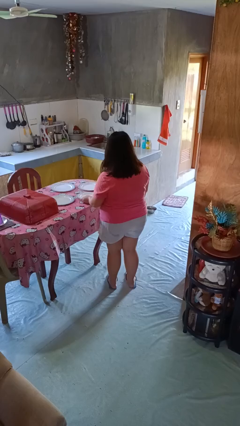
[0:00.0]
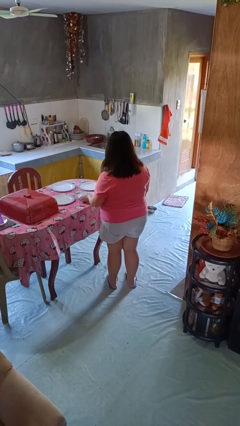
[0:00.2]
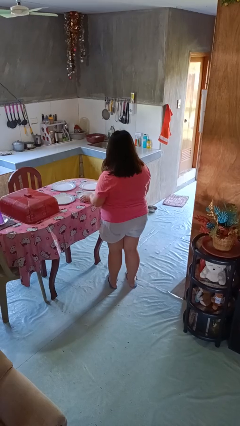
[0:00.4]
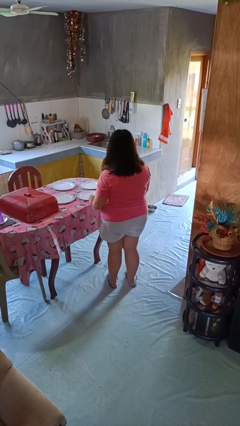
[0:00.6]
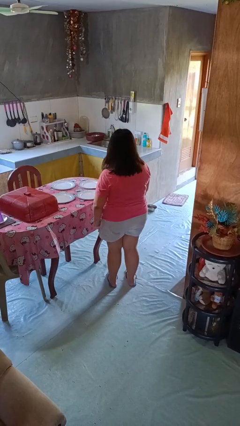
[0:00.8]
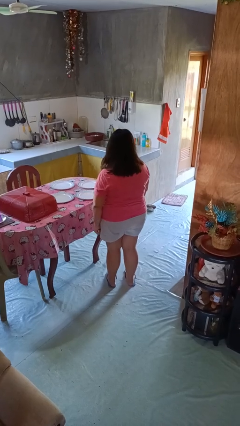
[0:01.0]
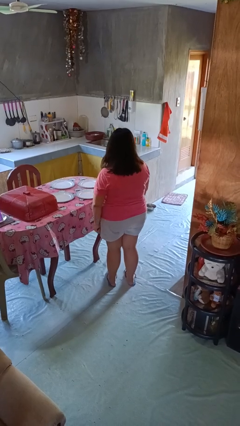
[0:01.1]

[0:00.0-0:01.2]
person sets table

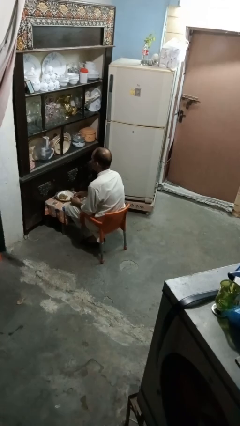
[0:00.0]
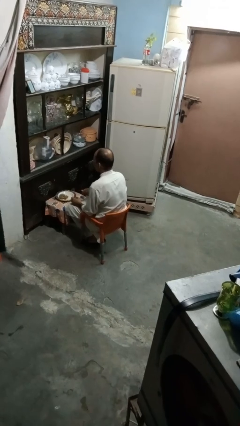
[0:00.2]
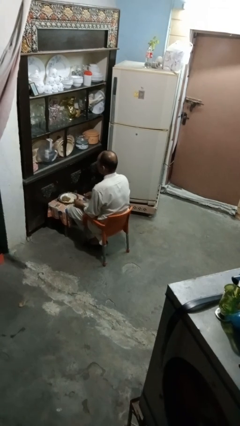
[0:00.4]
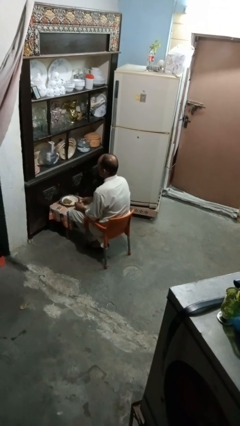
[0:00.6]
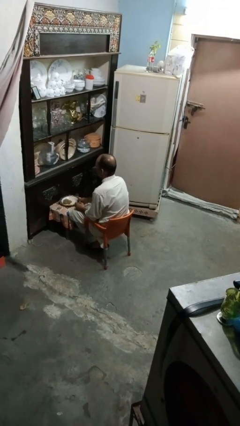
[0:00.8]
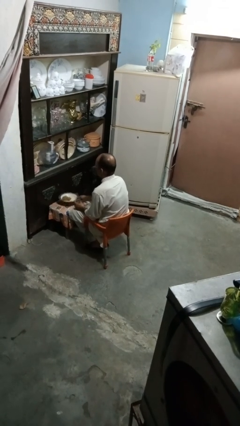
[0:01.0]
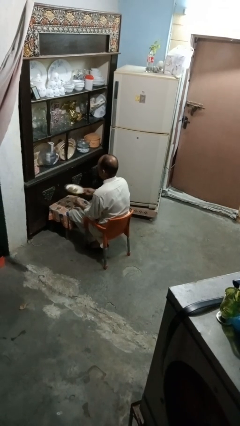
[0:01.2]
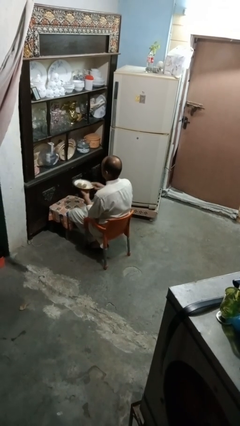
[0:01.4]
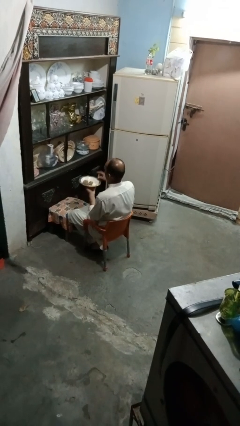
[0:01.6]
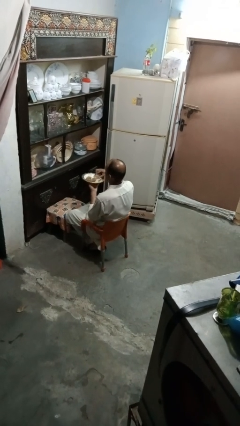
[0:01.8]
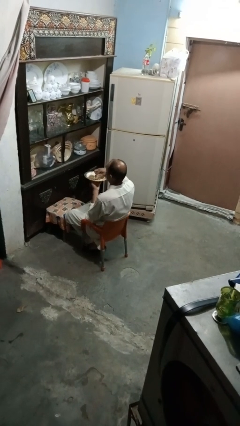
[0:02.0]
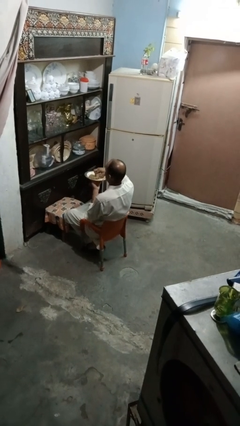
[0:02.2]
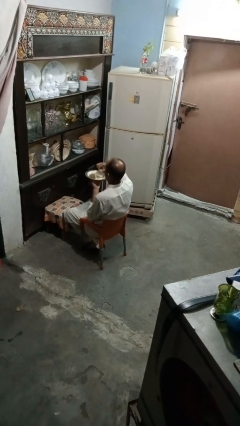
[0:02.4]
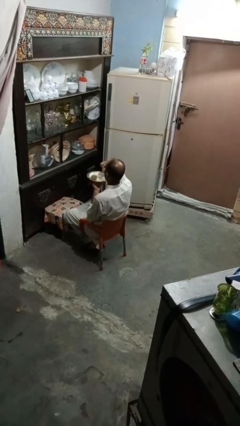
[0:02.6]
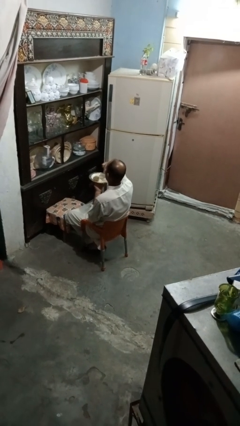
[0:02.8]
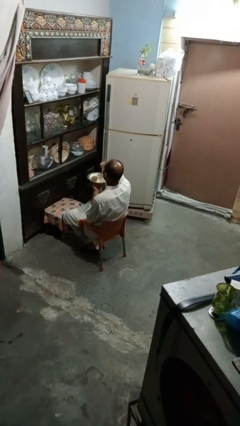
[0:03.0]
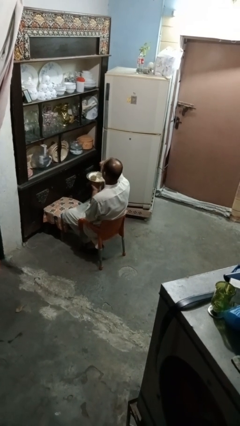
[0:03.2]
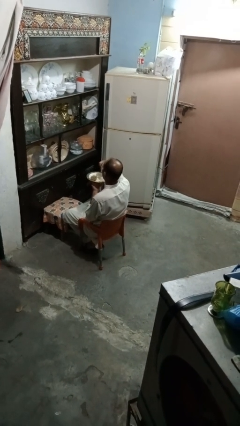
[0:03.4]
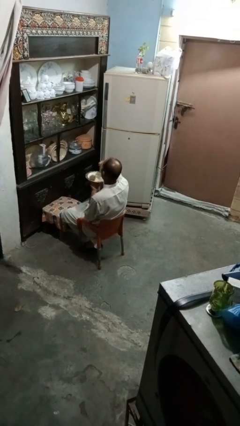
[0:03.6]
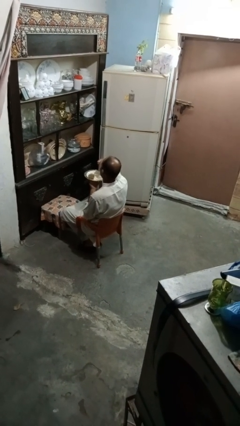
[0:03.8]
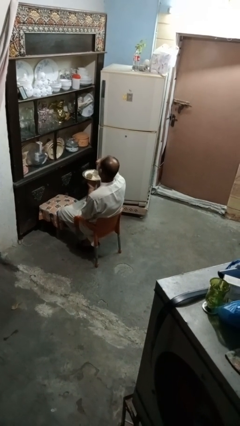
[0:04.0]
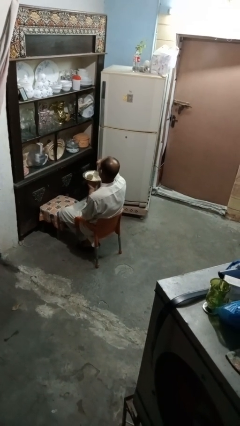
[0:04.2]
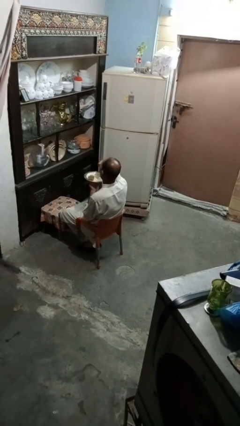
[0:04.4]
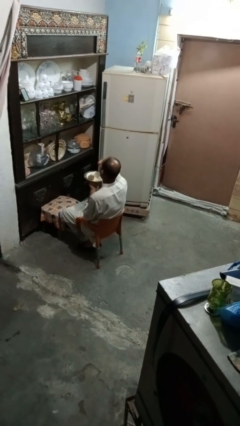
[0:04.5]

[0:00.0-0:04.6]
person eats with hands

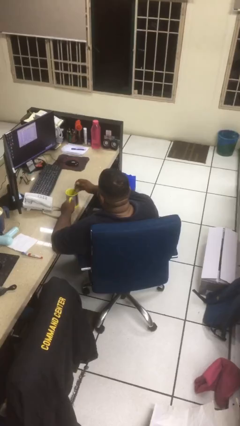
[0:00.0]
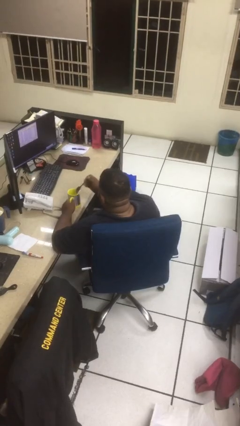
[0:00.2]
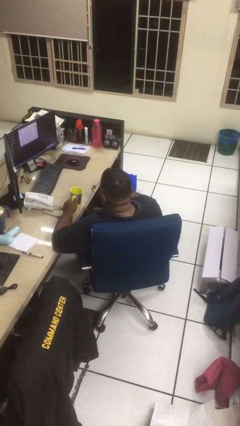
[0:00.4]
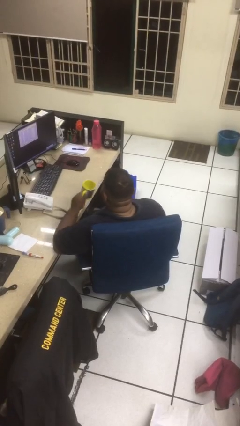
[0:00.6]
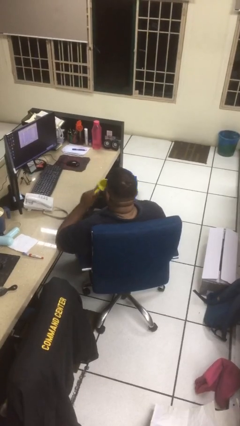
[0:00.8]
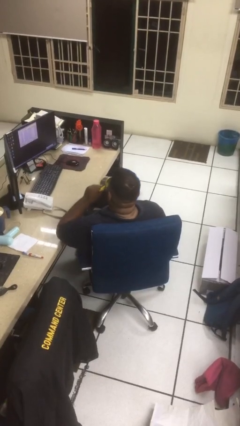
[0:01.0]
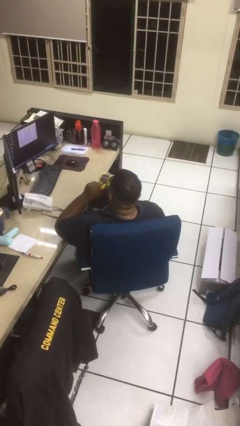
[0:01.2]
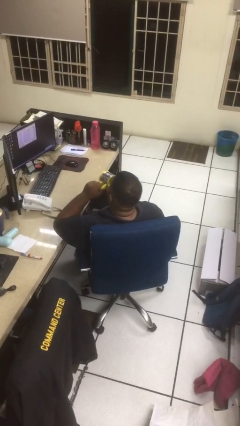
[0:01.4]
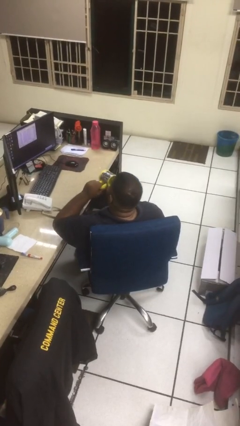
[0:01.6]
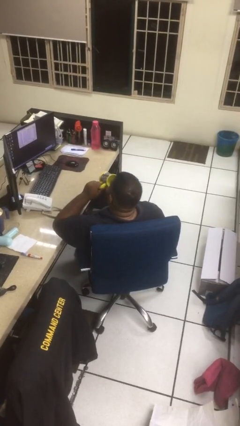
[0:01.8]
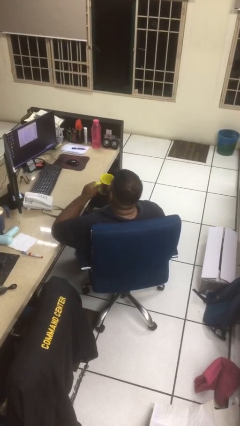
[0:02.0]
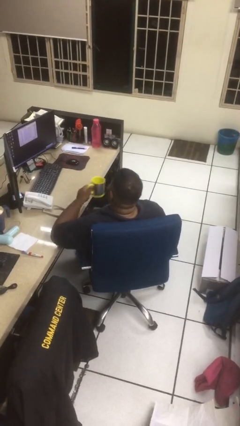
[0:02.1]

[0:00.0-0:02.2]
person drinks from mug

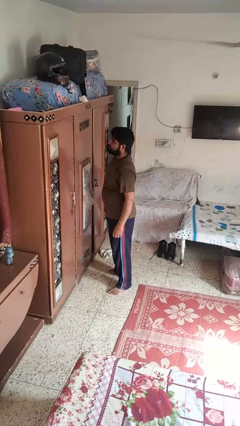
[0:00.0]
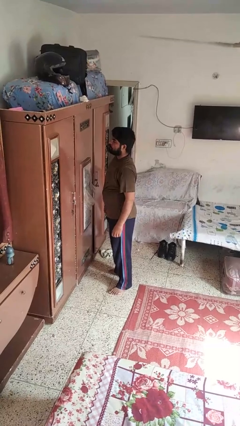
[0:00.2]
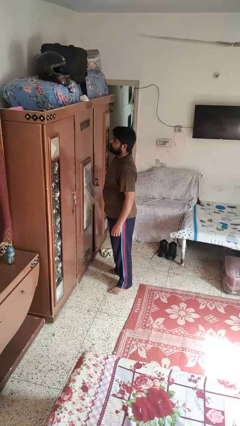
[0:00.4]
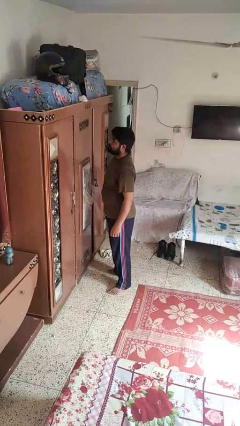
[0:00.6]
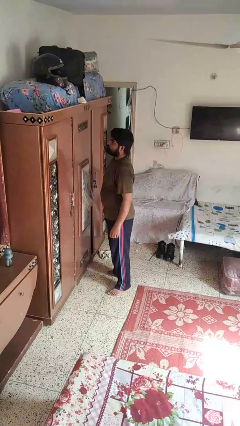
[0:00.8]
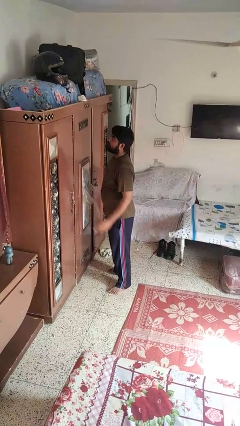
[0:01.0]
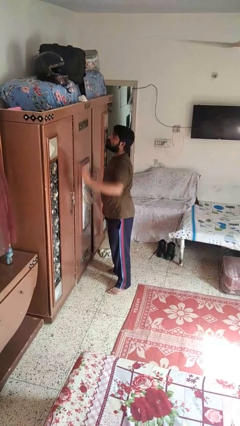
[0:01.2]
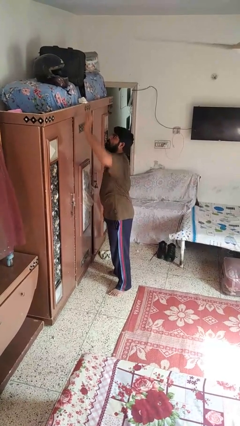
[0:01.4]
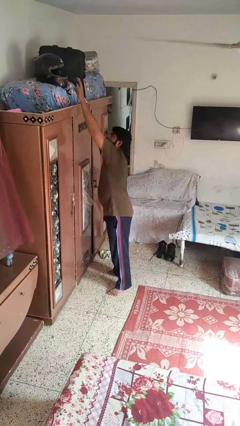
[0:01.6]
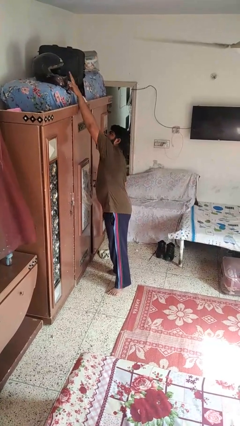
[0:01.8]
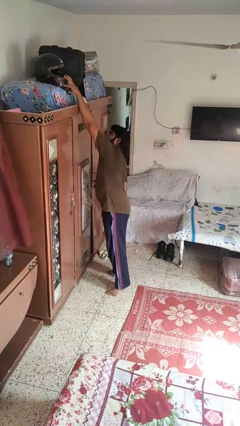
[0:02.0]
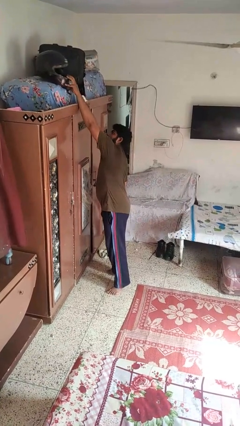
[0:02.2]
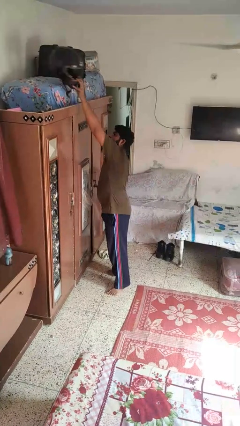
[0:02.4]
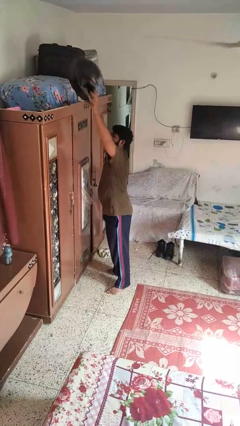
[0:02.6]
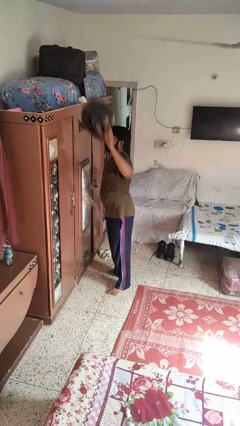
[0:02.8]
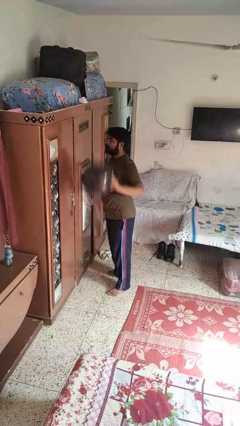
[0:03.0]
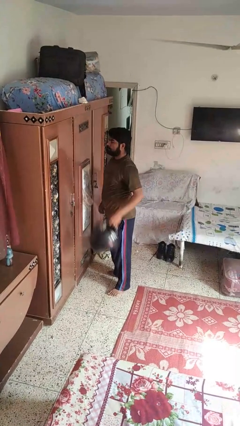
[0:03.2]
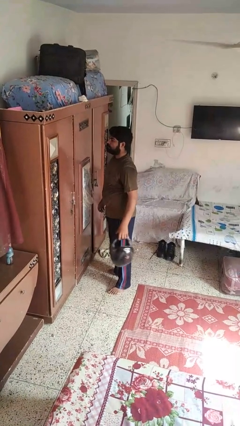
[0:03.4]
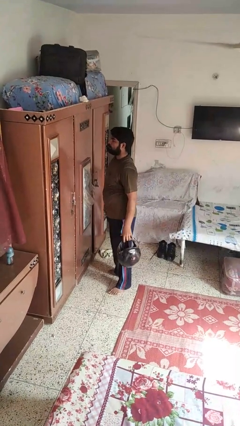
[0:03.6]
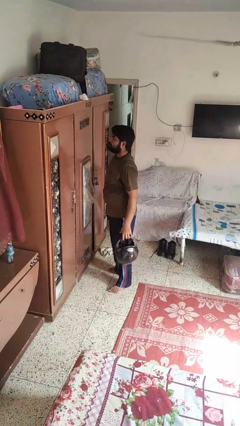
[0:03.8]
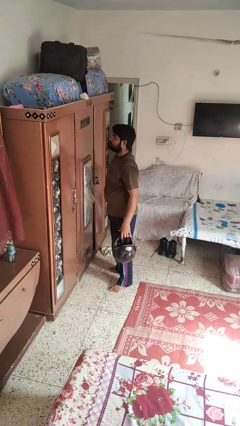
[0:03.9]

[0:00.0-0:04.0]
person picks up object from shelf

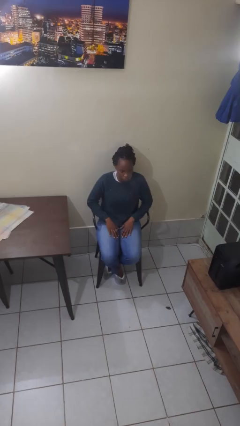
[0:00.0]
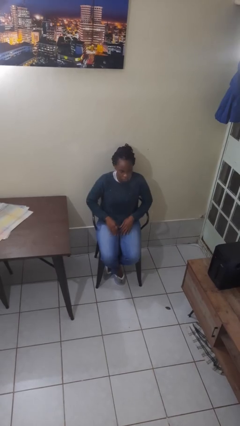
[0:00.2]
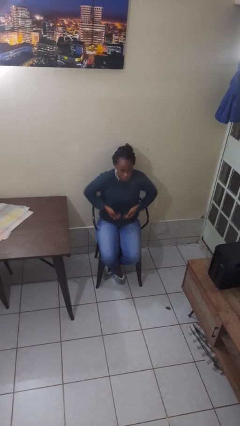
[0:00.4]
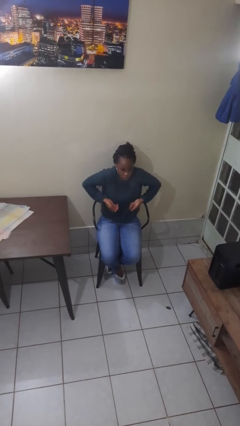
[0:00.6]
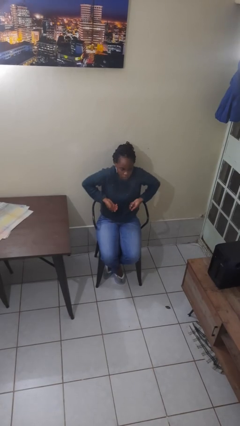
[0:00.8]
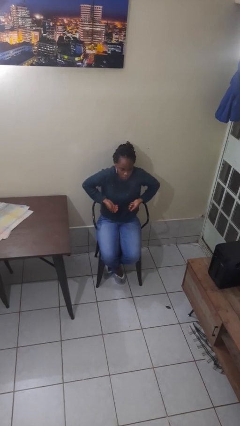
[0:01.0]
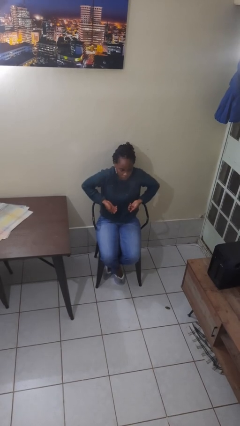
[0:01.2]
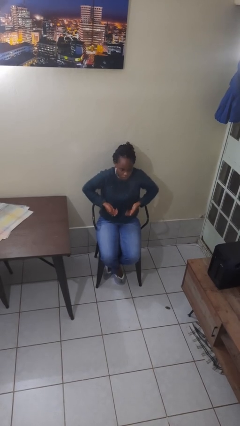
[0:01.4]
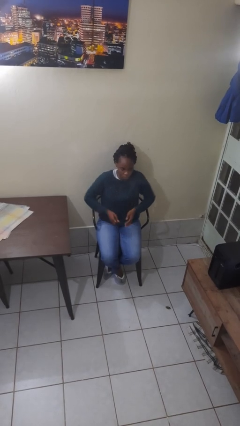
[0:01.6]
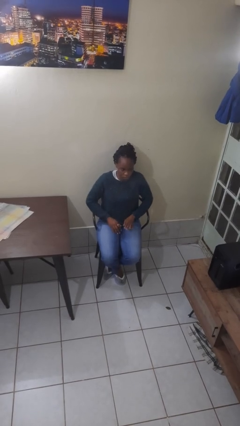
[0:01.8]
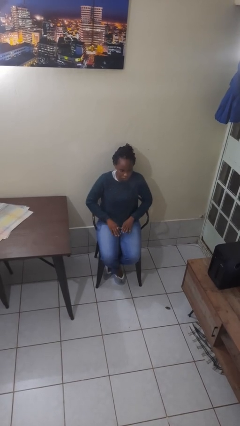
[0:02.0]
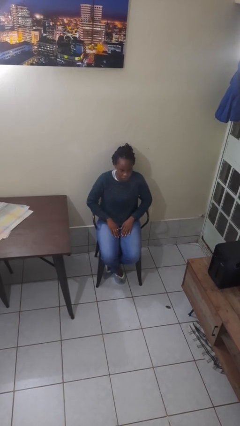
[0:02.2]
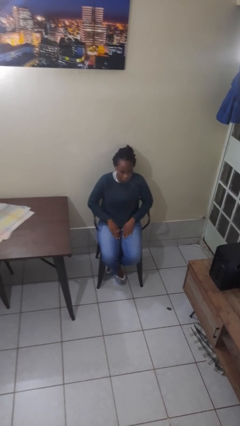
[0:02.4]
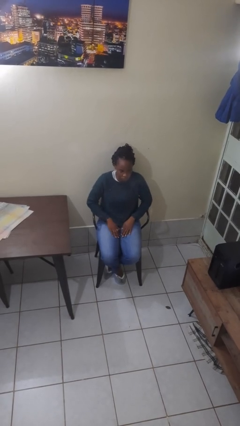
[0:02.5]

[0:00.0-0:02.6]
person shrugs

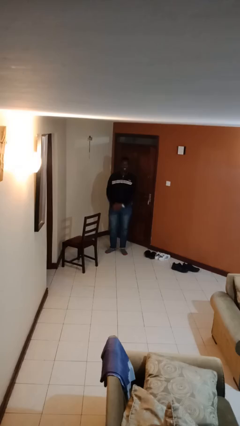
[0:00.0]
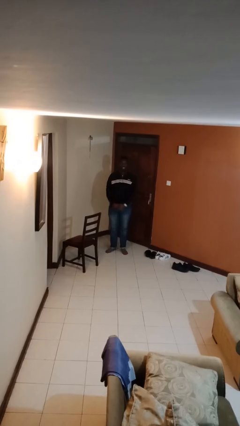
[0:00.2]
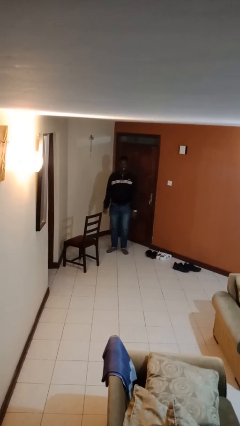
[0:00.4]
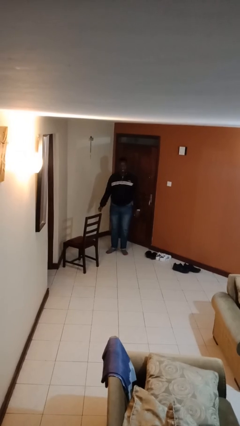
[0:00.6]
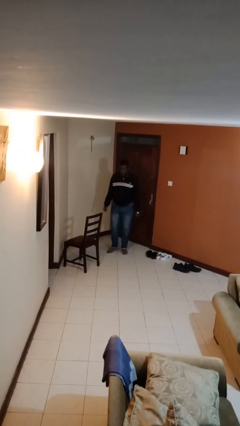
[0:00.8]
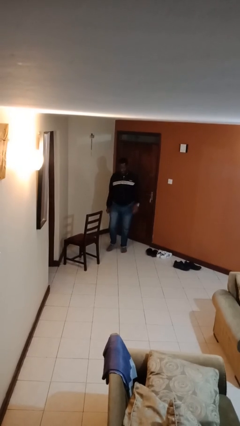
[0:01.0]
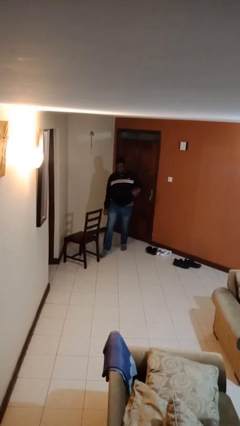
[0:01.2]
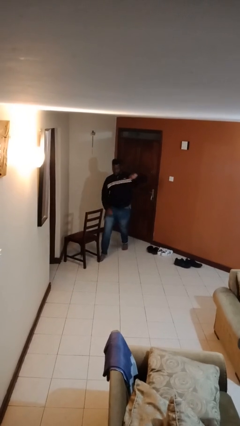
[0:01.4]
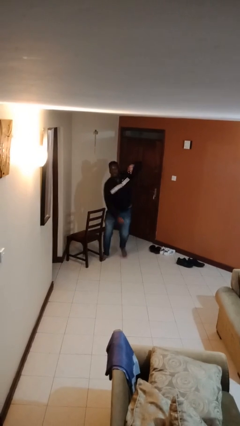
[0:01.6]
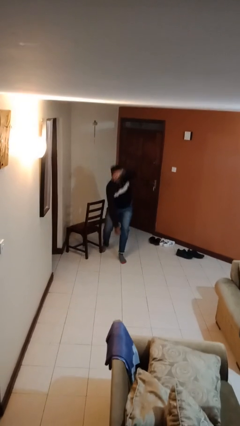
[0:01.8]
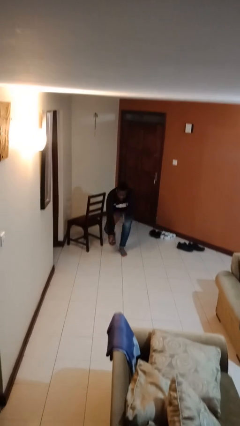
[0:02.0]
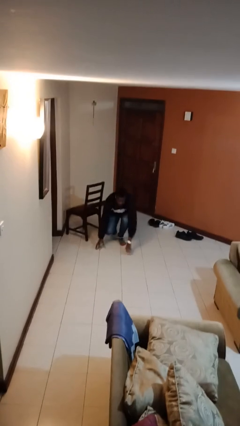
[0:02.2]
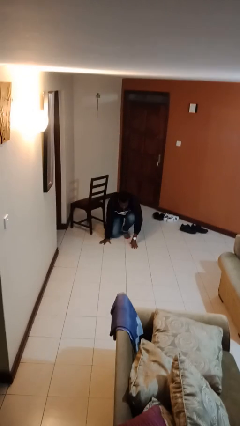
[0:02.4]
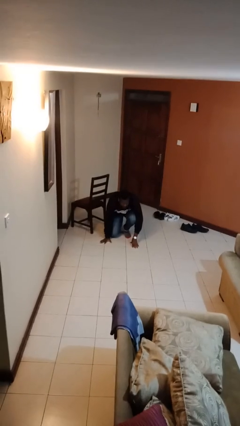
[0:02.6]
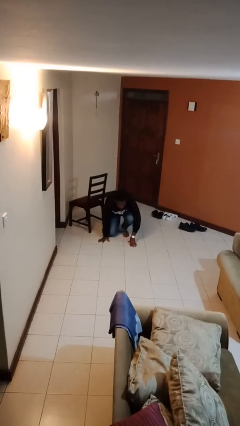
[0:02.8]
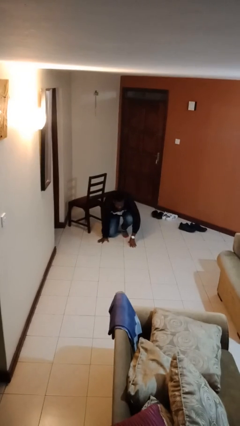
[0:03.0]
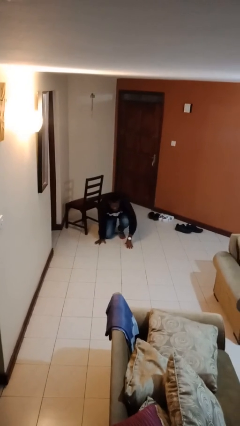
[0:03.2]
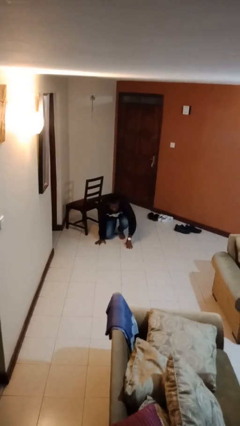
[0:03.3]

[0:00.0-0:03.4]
person trips on object on floor
